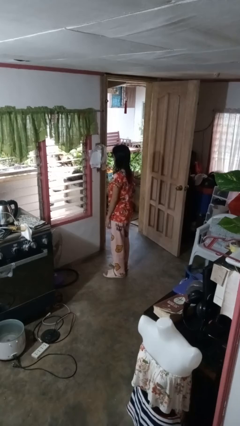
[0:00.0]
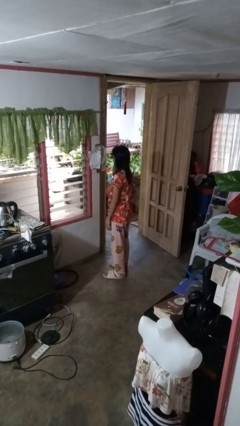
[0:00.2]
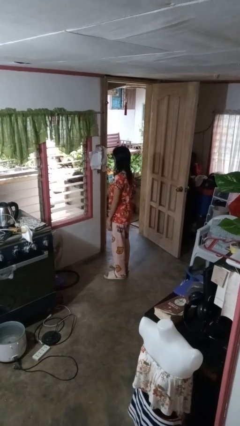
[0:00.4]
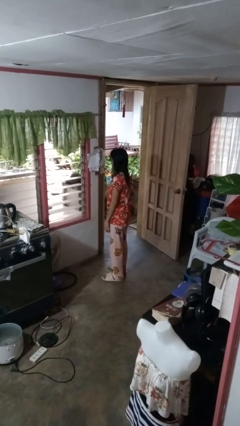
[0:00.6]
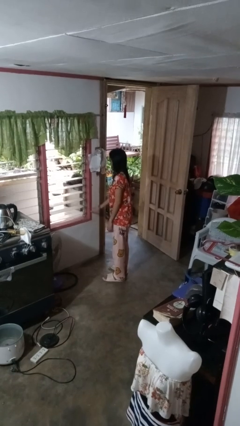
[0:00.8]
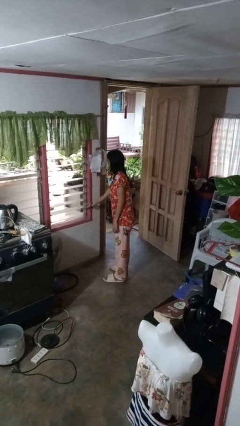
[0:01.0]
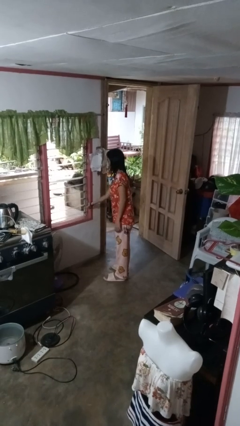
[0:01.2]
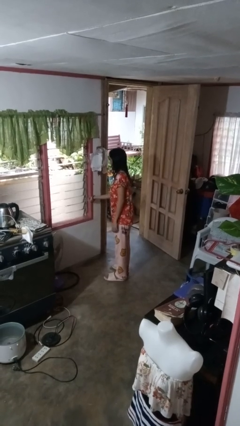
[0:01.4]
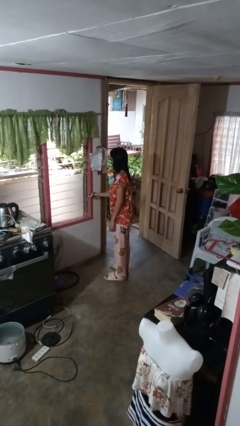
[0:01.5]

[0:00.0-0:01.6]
person closes home window

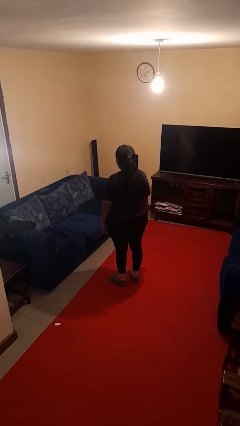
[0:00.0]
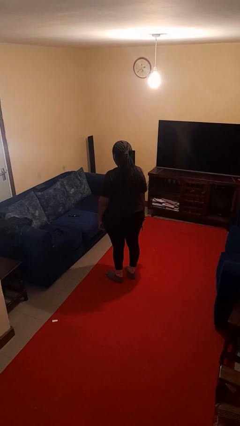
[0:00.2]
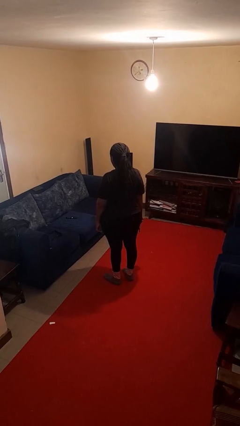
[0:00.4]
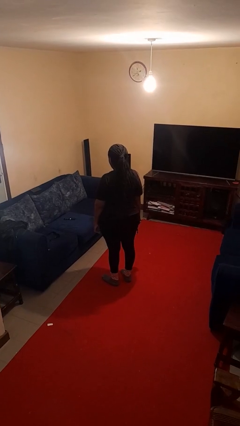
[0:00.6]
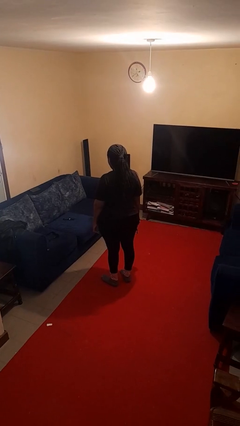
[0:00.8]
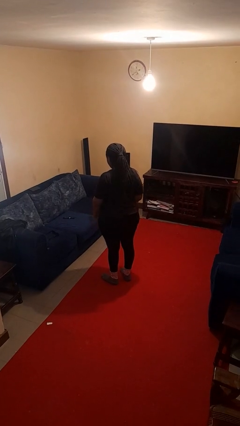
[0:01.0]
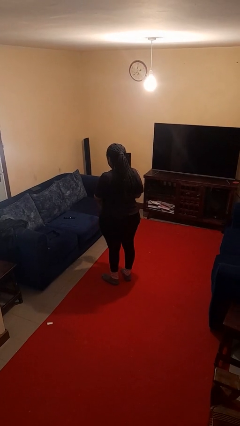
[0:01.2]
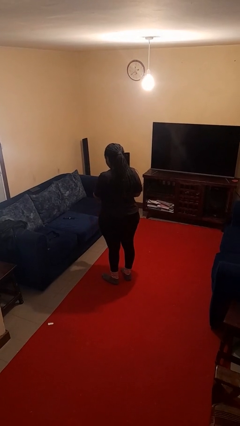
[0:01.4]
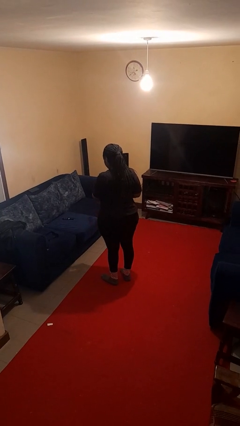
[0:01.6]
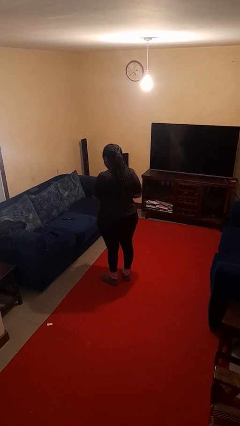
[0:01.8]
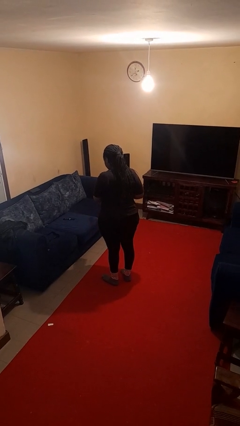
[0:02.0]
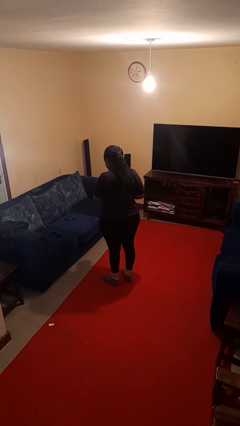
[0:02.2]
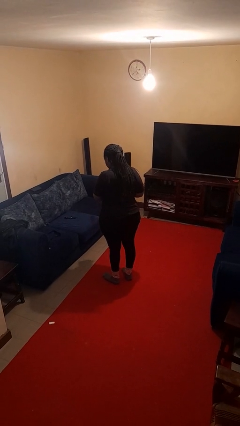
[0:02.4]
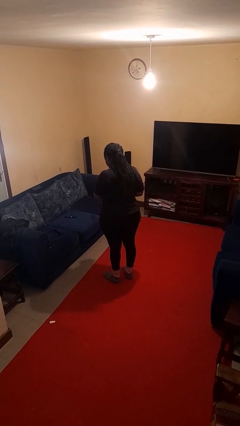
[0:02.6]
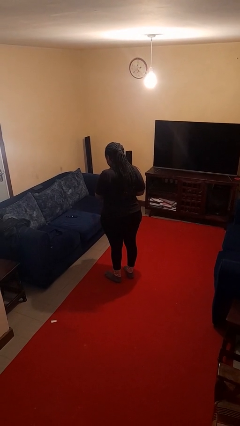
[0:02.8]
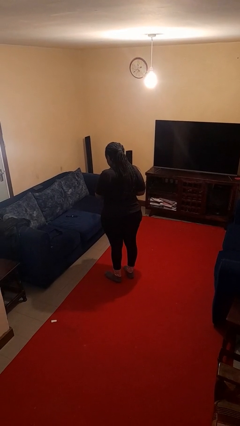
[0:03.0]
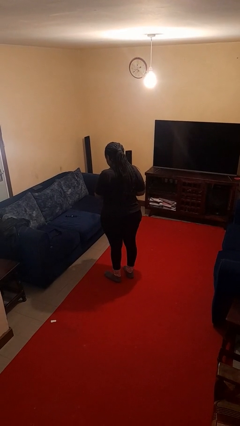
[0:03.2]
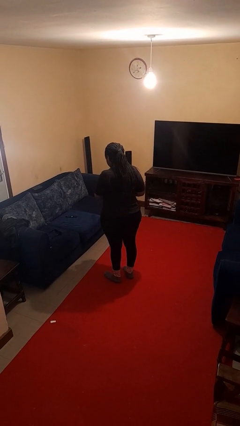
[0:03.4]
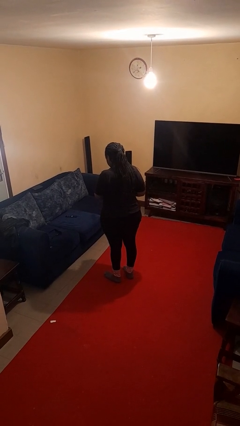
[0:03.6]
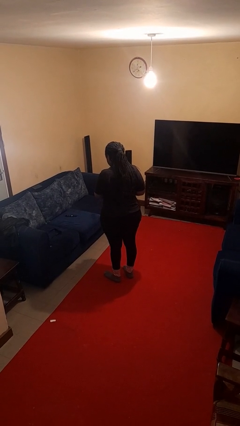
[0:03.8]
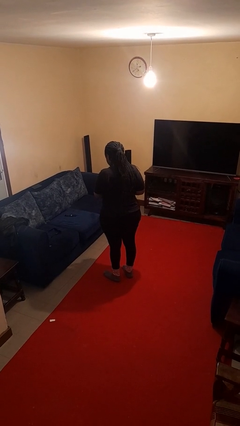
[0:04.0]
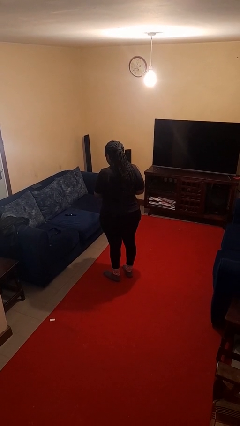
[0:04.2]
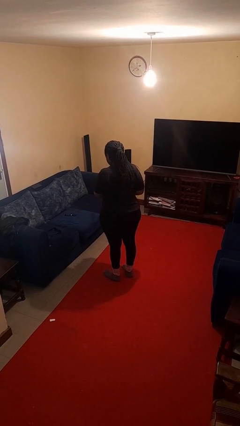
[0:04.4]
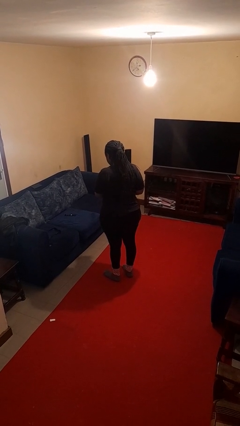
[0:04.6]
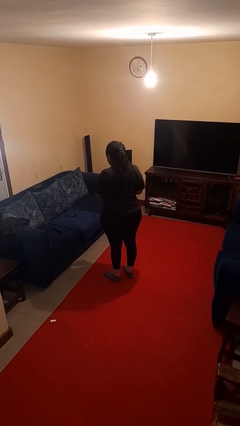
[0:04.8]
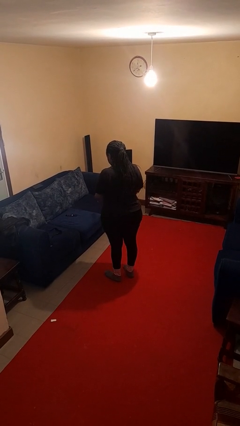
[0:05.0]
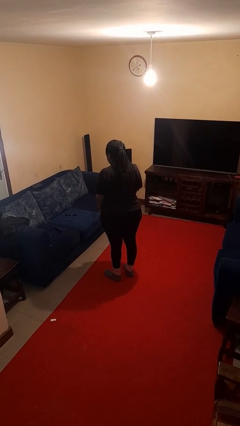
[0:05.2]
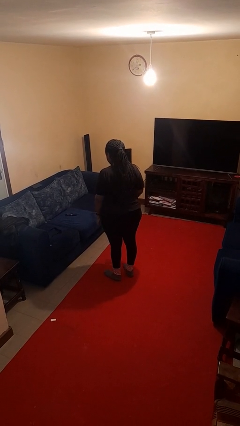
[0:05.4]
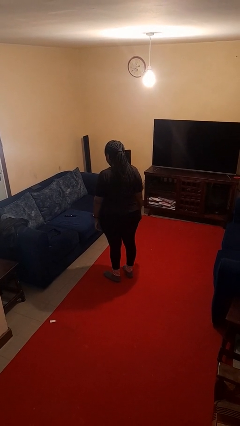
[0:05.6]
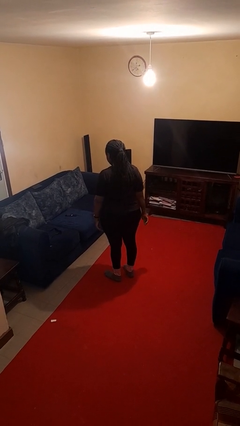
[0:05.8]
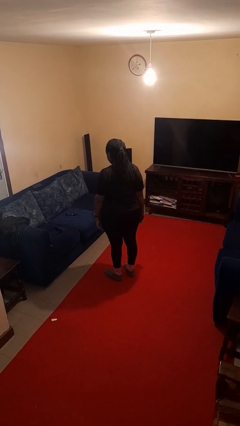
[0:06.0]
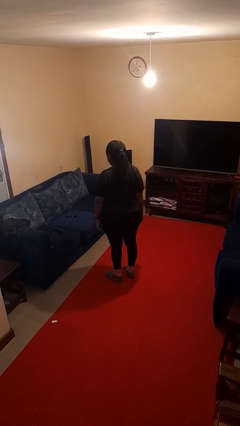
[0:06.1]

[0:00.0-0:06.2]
person puts on wristwatch

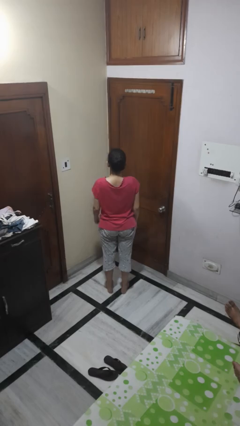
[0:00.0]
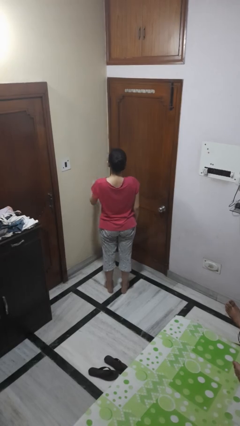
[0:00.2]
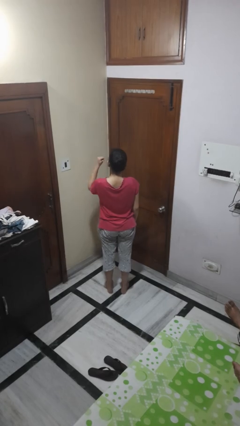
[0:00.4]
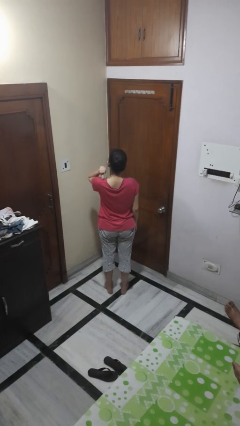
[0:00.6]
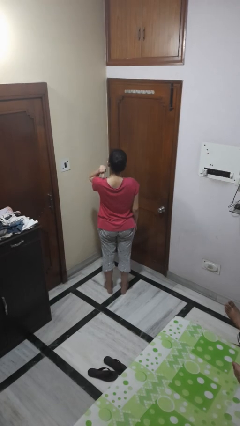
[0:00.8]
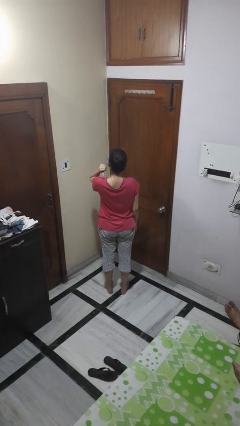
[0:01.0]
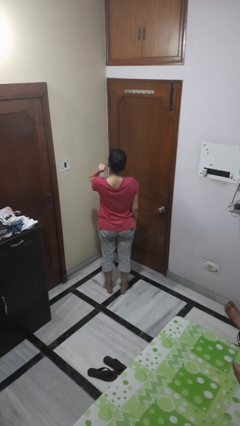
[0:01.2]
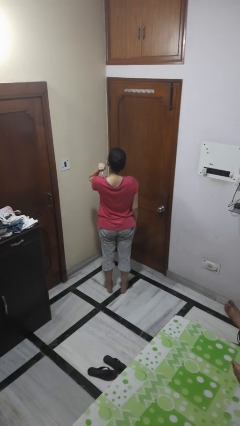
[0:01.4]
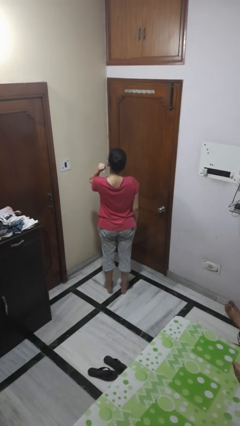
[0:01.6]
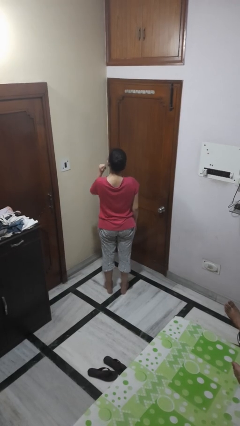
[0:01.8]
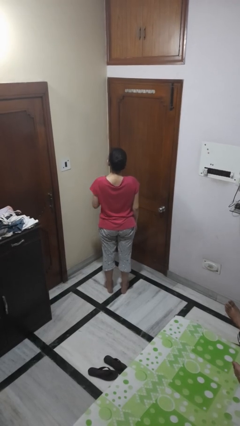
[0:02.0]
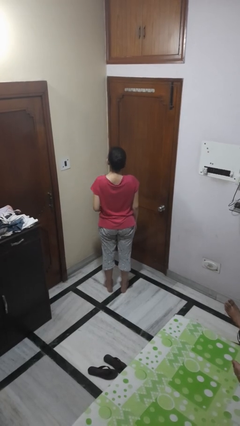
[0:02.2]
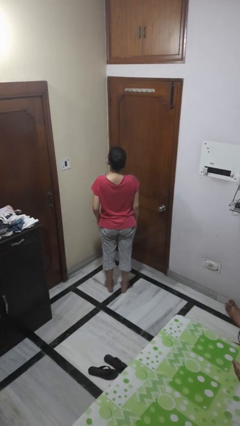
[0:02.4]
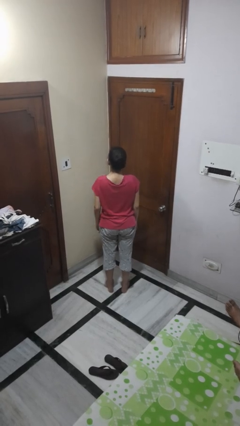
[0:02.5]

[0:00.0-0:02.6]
person gestures behind me

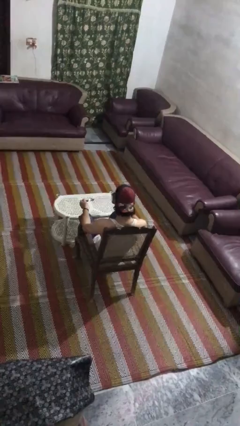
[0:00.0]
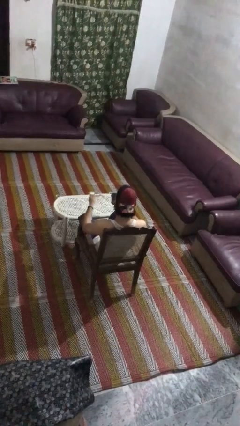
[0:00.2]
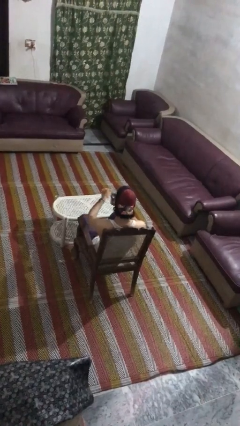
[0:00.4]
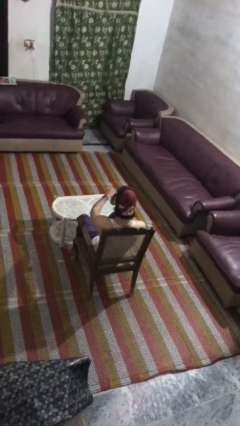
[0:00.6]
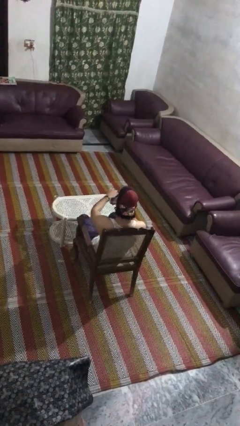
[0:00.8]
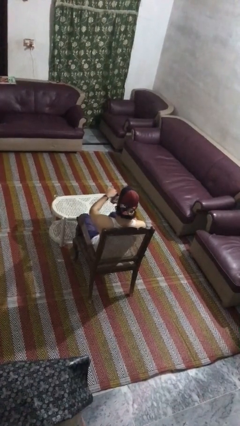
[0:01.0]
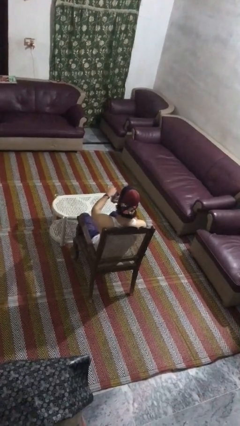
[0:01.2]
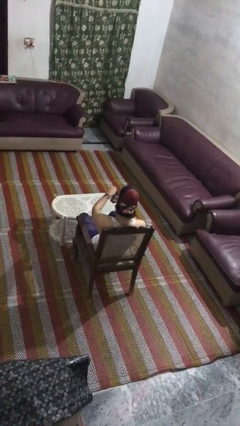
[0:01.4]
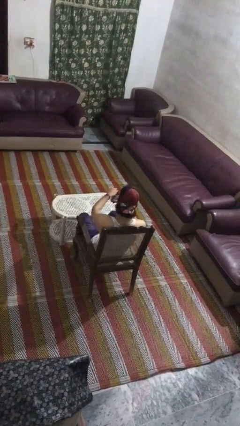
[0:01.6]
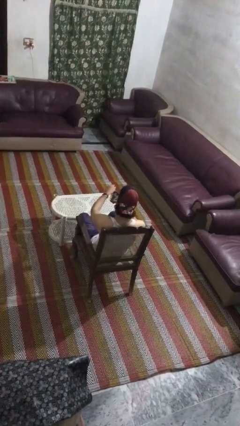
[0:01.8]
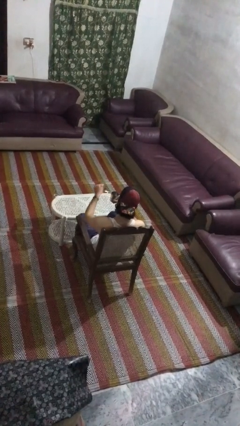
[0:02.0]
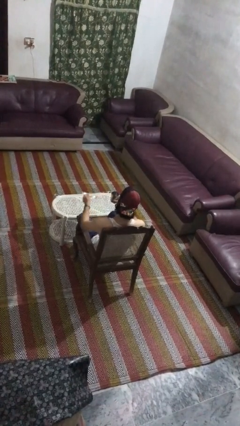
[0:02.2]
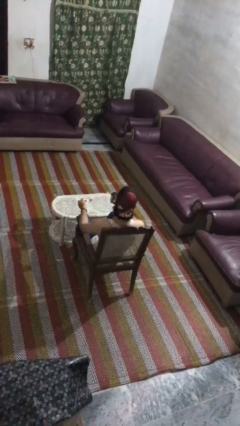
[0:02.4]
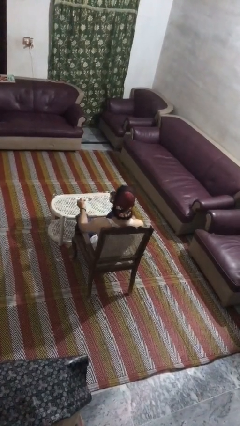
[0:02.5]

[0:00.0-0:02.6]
person stirs mug

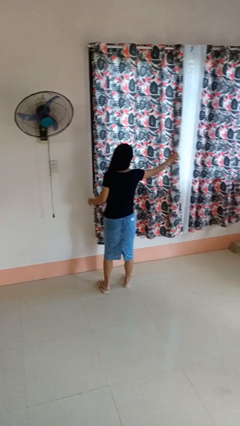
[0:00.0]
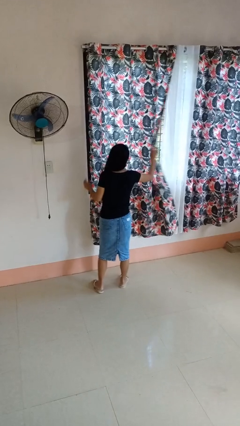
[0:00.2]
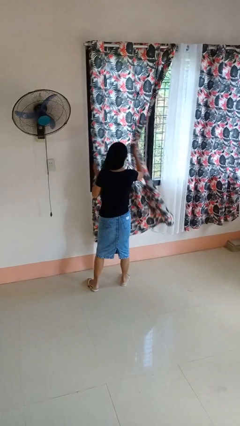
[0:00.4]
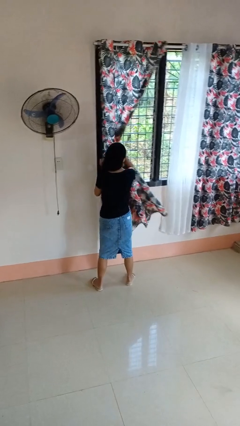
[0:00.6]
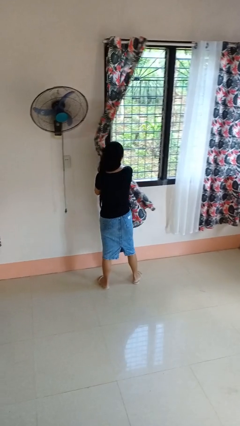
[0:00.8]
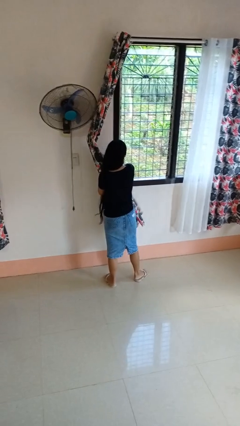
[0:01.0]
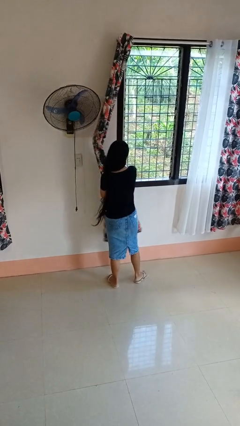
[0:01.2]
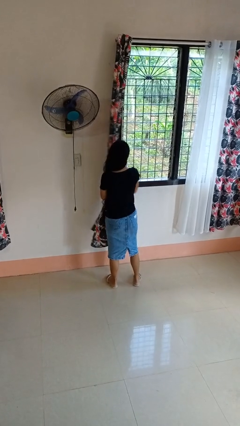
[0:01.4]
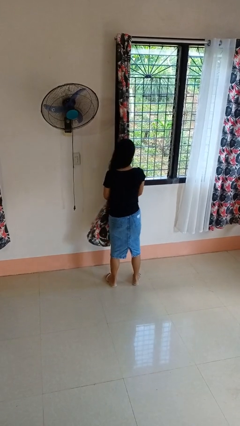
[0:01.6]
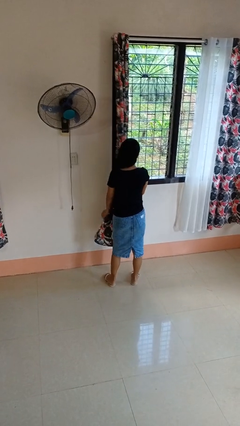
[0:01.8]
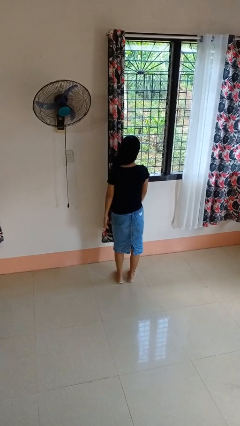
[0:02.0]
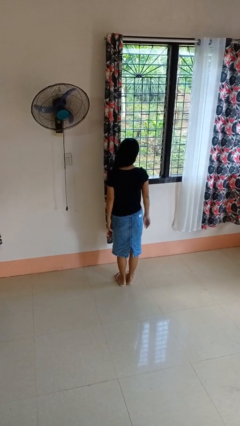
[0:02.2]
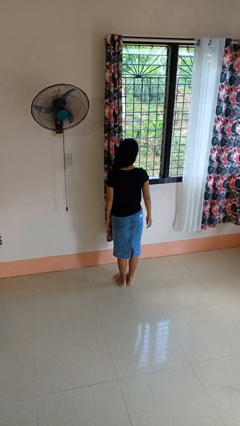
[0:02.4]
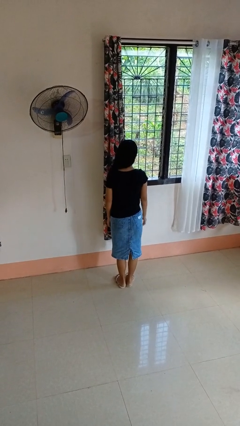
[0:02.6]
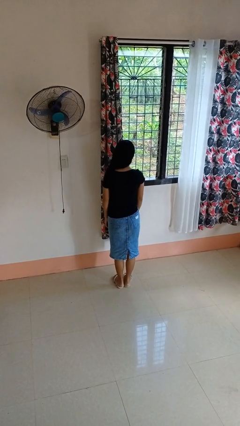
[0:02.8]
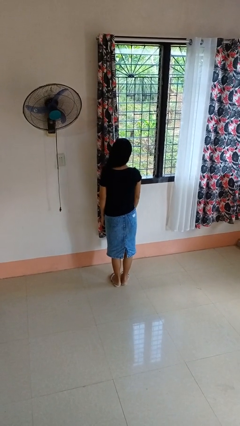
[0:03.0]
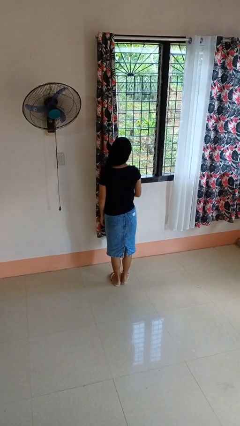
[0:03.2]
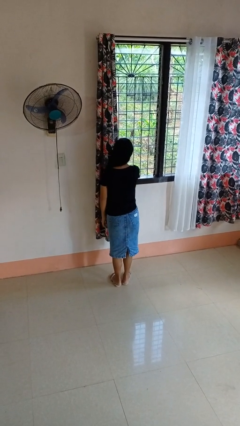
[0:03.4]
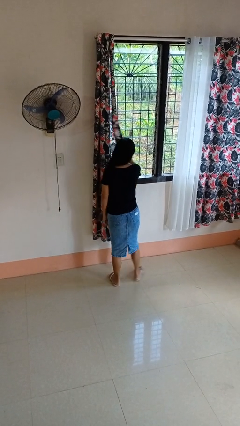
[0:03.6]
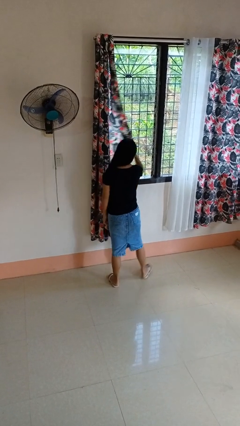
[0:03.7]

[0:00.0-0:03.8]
person opens curtains

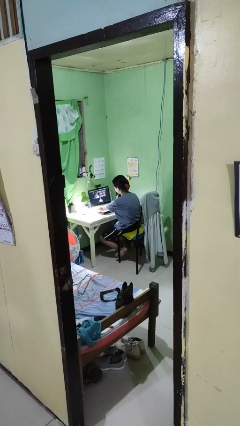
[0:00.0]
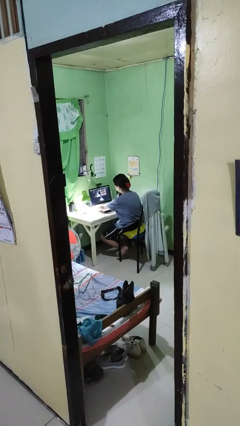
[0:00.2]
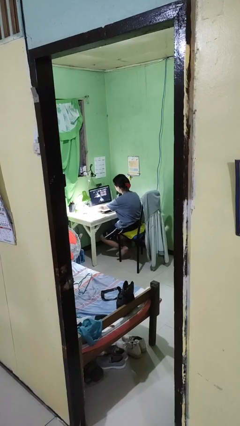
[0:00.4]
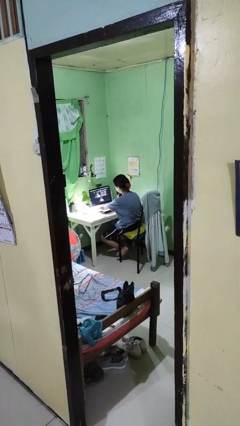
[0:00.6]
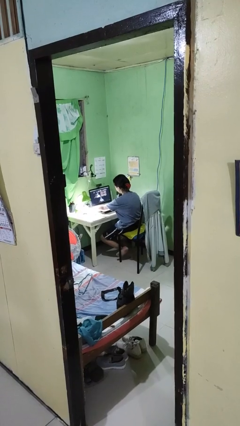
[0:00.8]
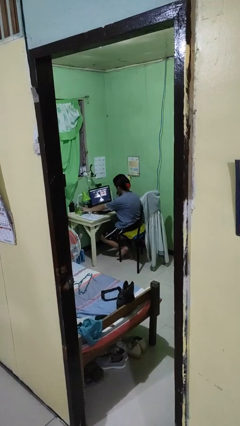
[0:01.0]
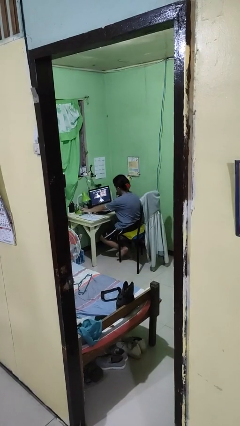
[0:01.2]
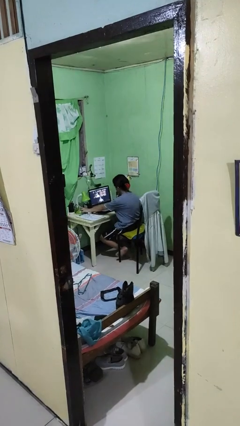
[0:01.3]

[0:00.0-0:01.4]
person turns off lamp
